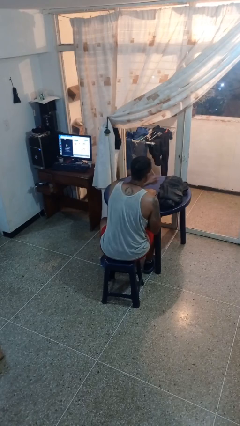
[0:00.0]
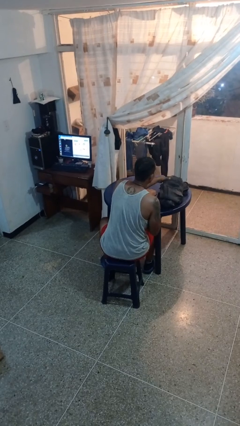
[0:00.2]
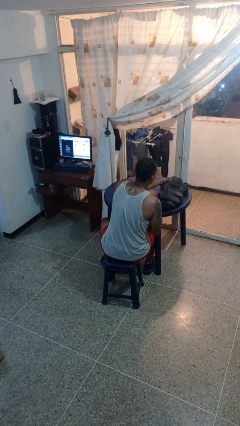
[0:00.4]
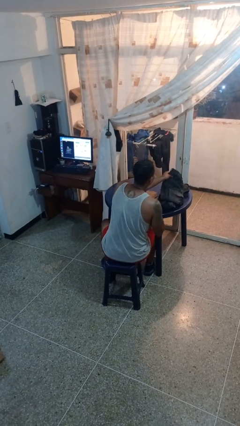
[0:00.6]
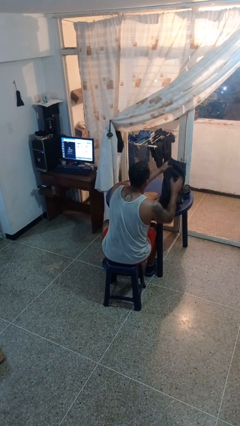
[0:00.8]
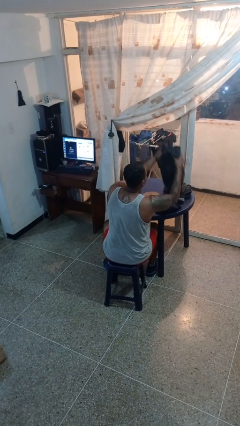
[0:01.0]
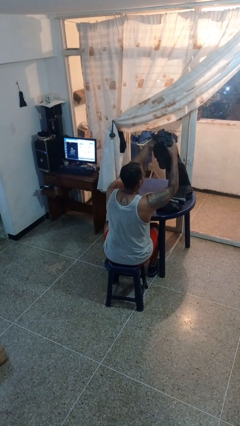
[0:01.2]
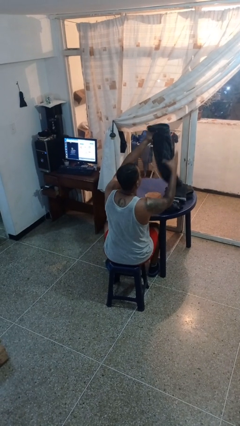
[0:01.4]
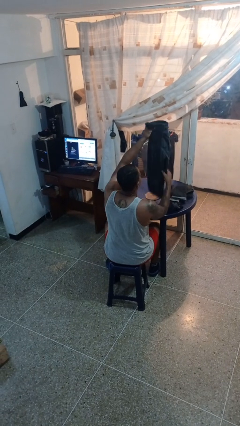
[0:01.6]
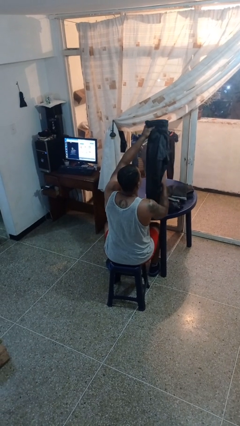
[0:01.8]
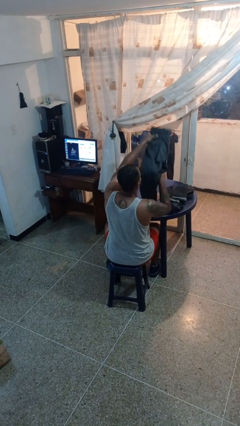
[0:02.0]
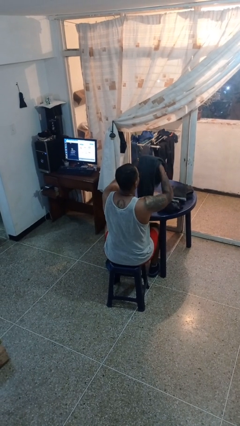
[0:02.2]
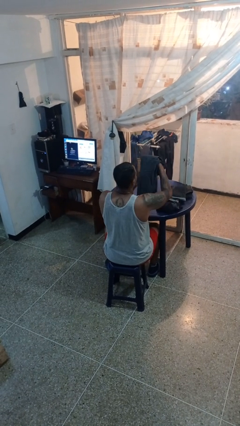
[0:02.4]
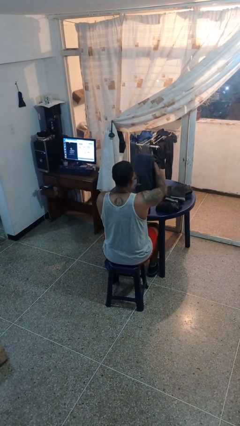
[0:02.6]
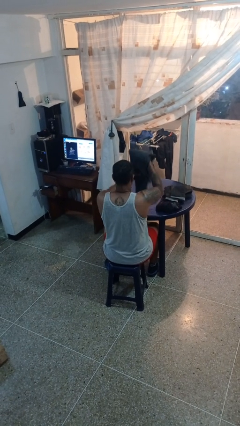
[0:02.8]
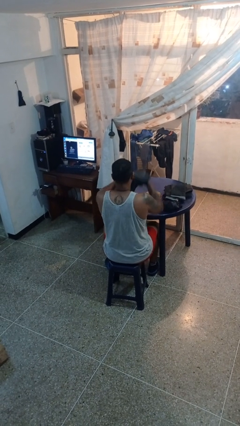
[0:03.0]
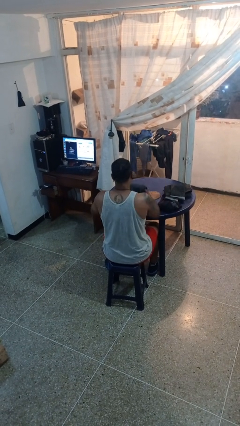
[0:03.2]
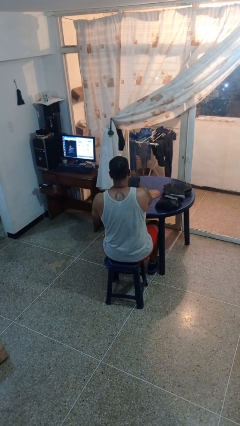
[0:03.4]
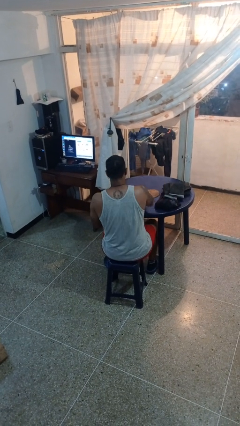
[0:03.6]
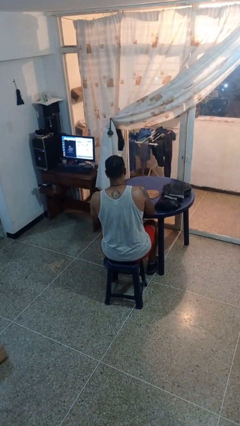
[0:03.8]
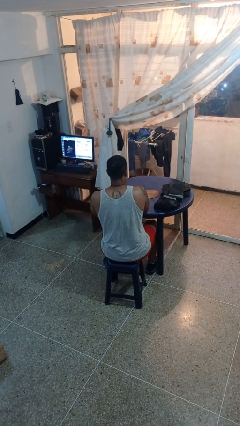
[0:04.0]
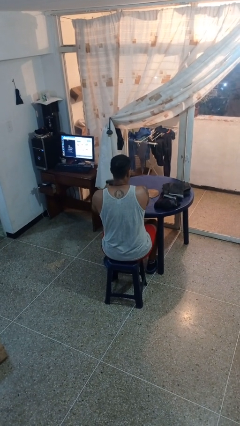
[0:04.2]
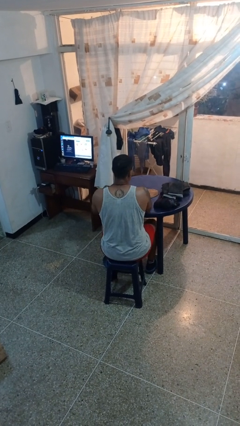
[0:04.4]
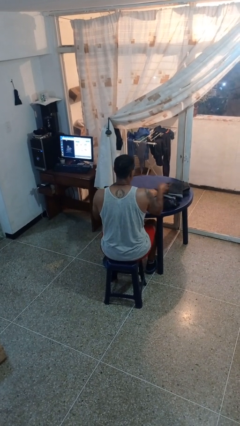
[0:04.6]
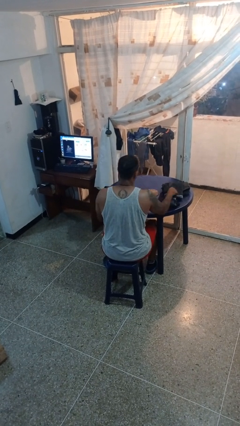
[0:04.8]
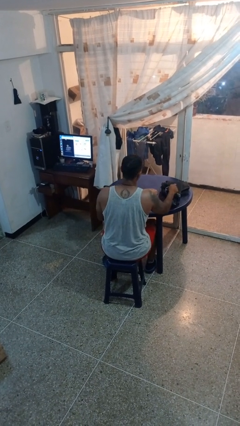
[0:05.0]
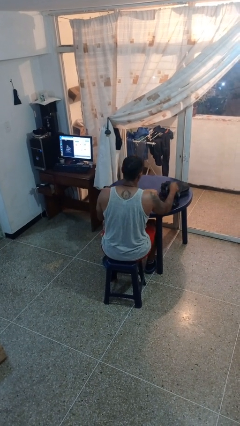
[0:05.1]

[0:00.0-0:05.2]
person folds pants
